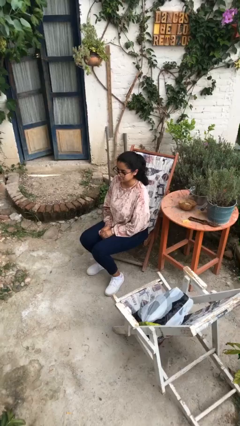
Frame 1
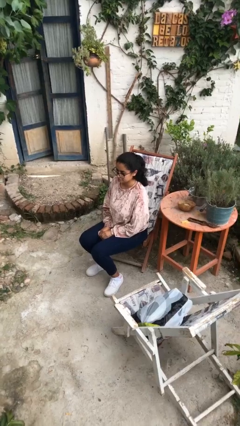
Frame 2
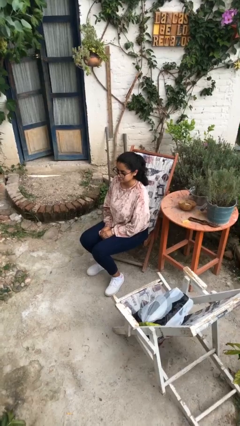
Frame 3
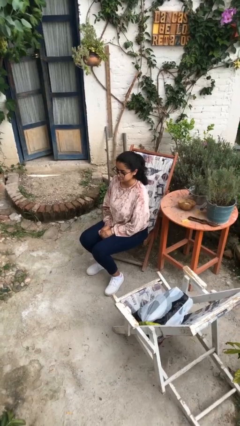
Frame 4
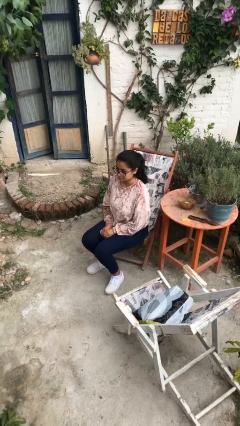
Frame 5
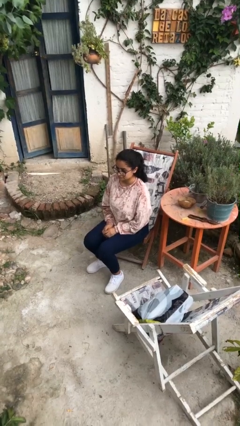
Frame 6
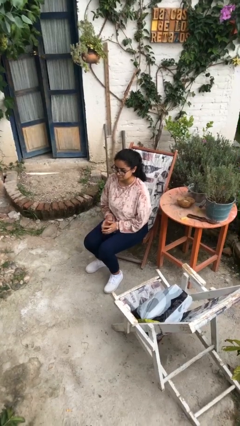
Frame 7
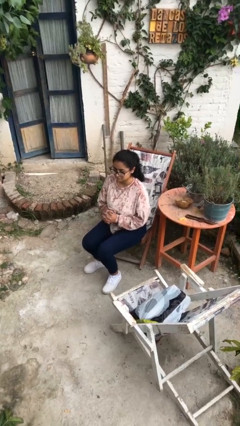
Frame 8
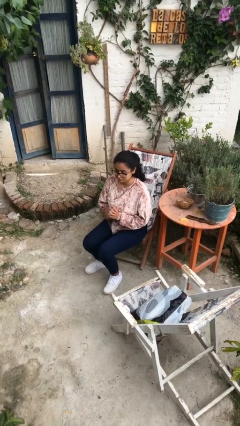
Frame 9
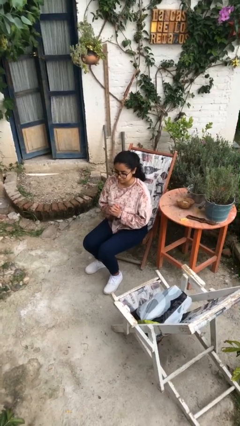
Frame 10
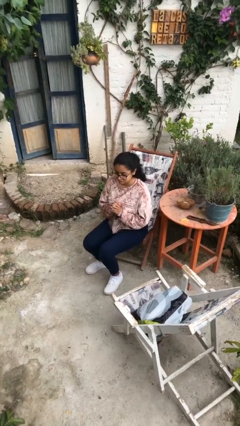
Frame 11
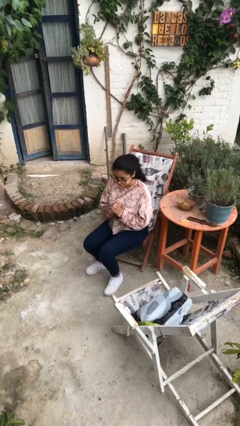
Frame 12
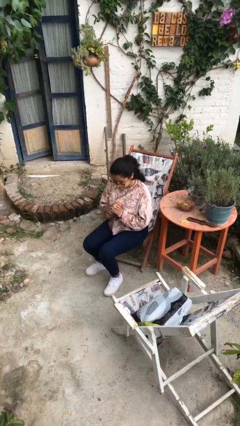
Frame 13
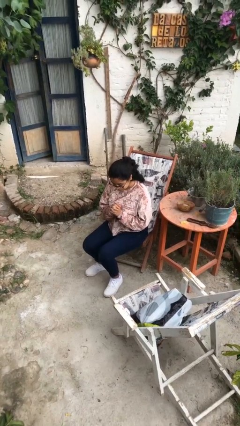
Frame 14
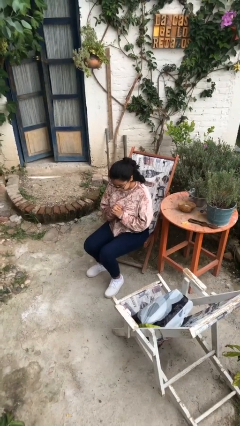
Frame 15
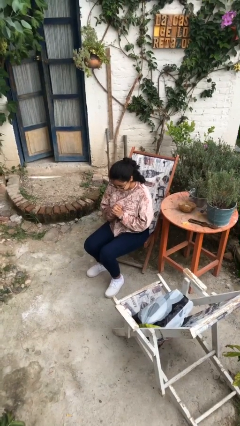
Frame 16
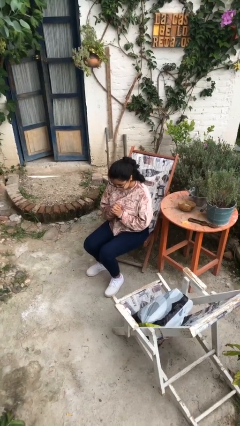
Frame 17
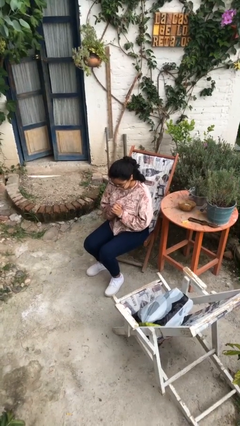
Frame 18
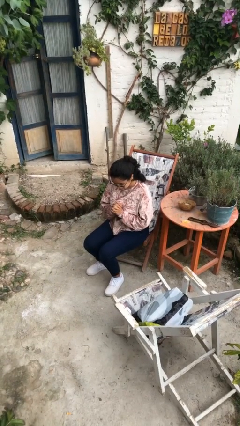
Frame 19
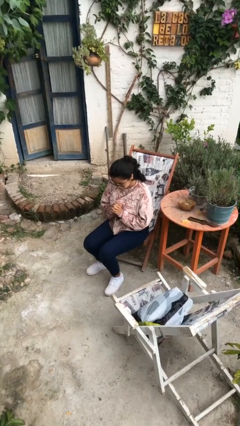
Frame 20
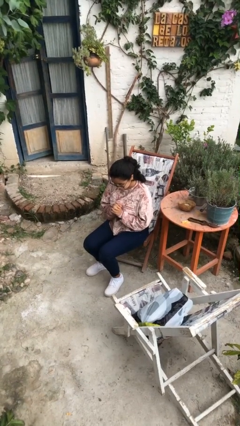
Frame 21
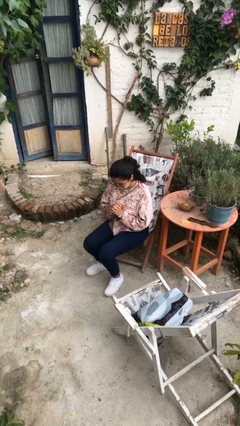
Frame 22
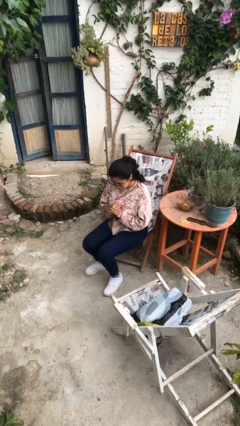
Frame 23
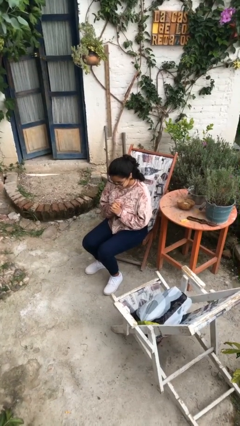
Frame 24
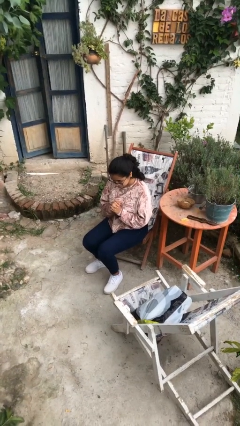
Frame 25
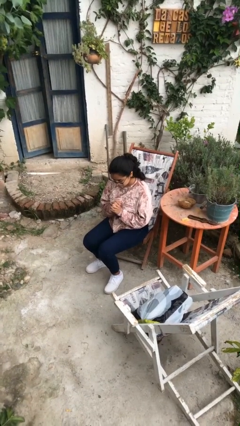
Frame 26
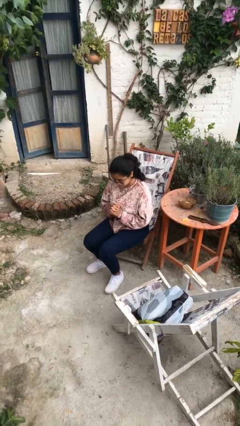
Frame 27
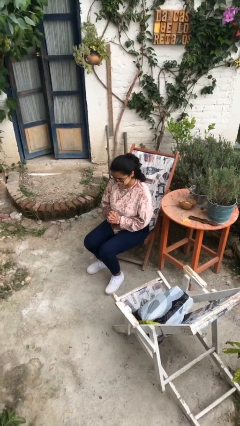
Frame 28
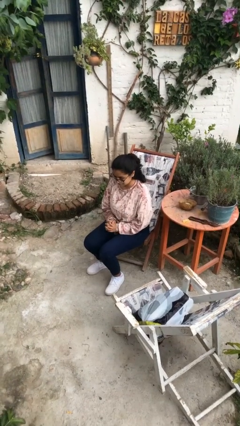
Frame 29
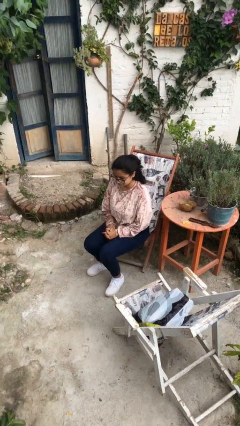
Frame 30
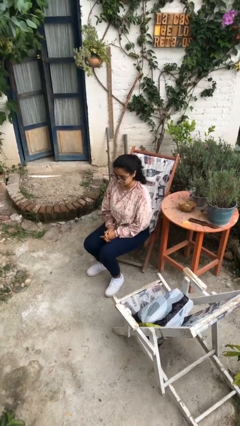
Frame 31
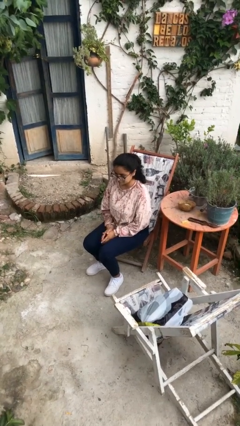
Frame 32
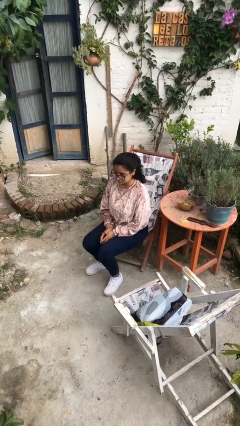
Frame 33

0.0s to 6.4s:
person prays

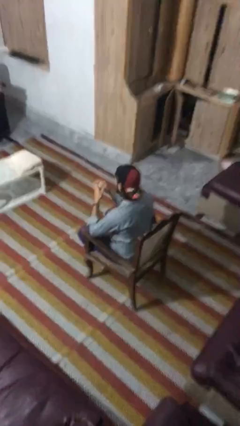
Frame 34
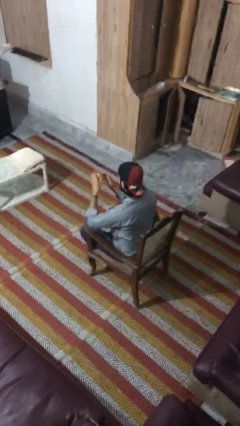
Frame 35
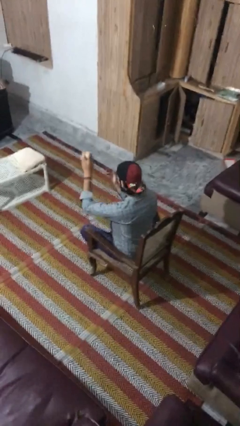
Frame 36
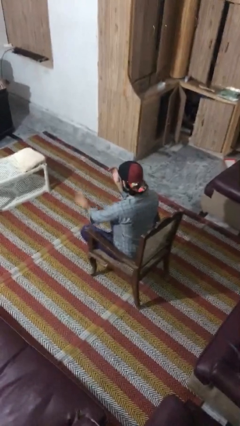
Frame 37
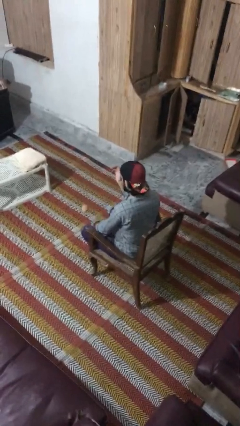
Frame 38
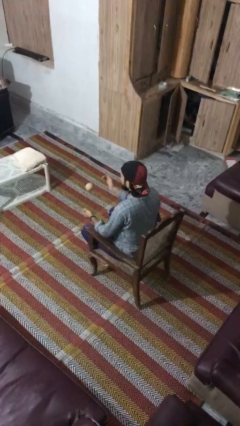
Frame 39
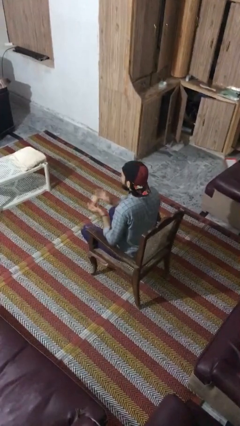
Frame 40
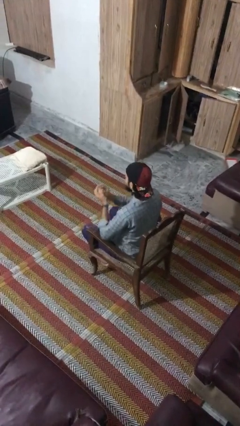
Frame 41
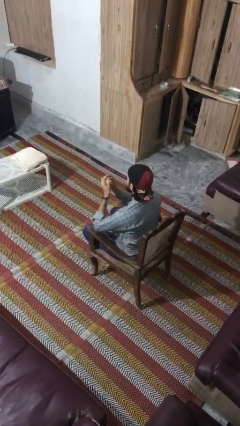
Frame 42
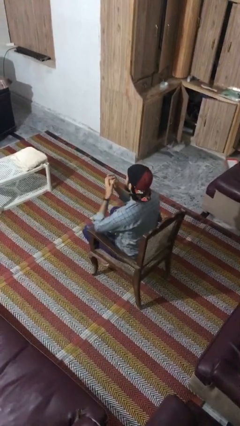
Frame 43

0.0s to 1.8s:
person bounces ball on floor

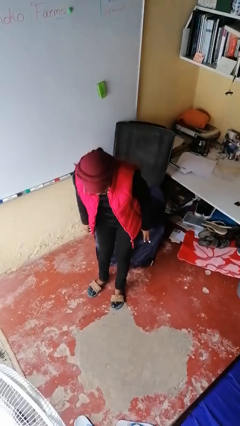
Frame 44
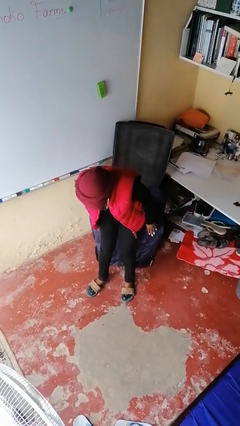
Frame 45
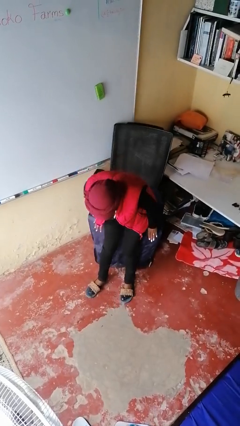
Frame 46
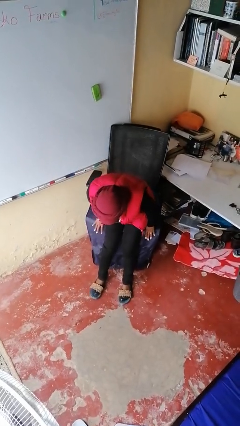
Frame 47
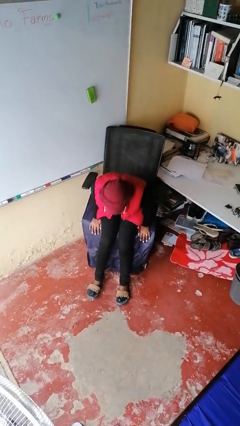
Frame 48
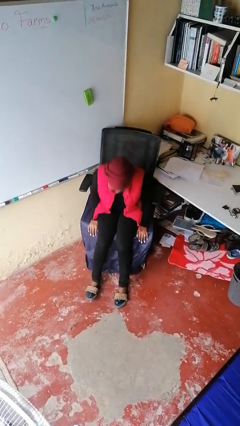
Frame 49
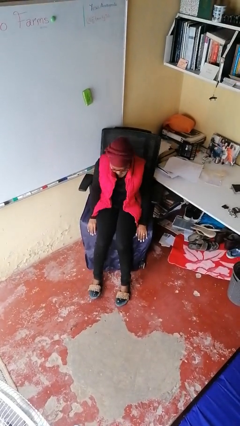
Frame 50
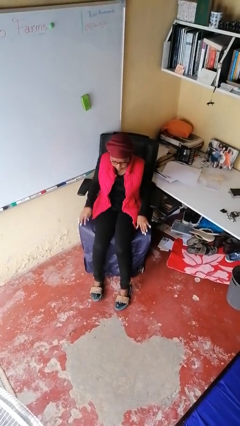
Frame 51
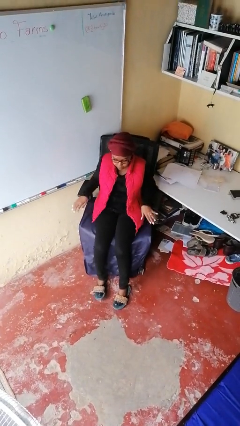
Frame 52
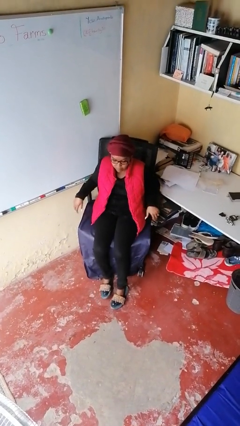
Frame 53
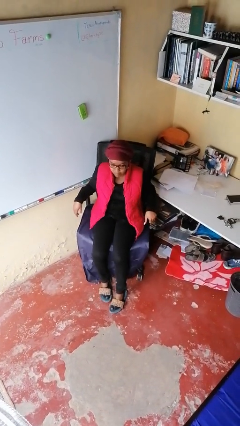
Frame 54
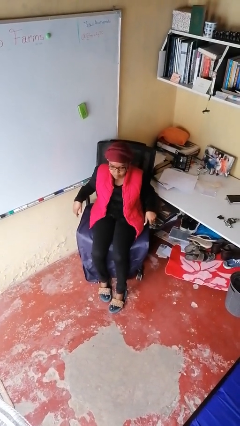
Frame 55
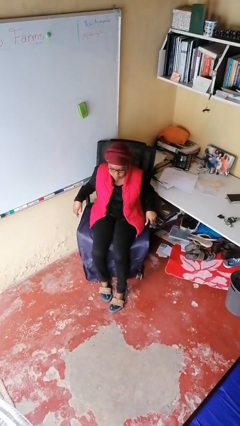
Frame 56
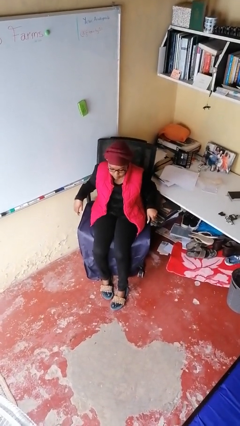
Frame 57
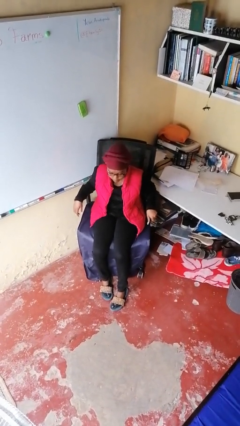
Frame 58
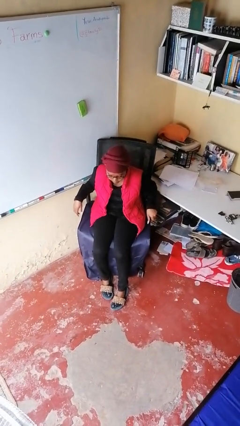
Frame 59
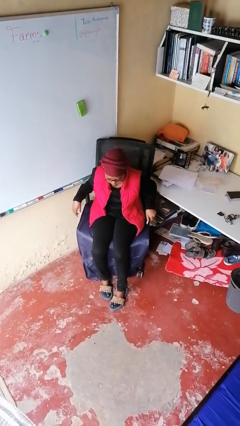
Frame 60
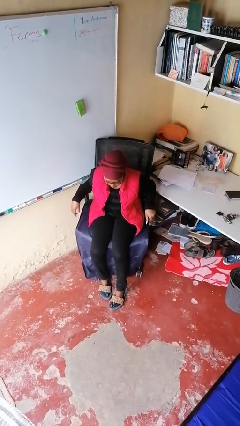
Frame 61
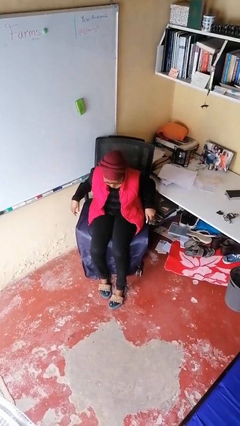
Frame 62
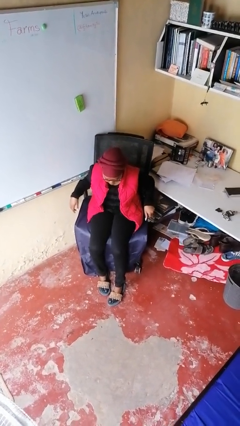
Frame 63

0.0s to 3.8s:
person sits down

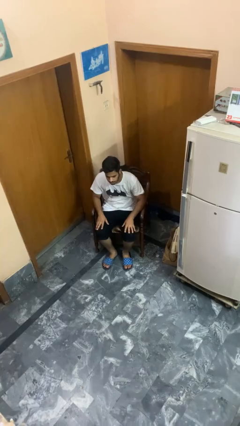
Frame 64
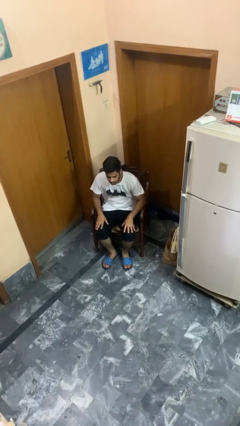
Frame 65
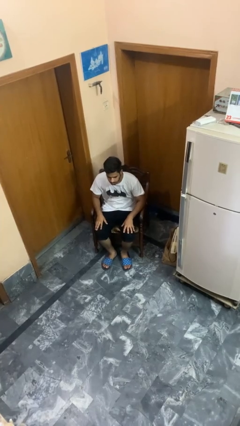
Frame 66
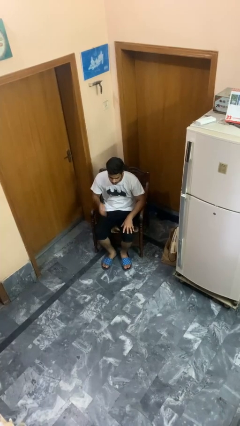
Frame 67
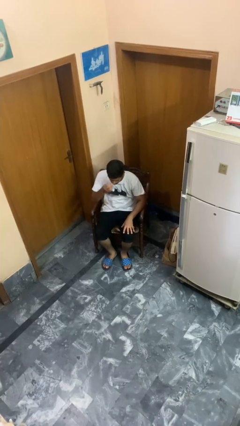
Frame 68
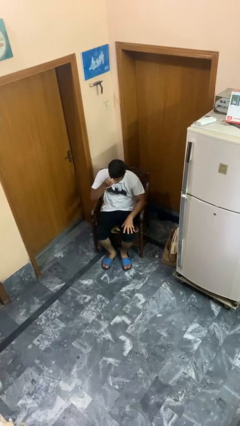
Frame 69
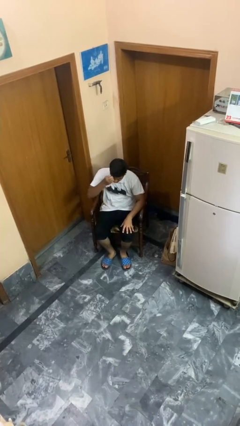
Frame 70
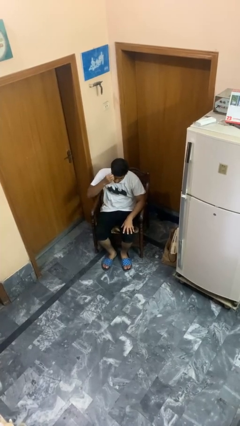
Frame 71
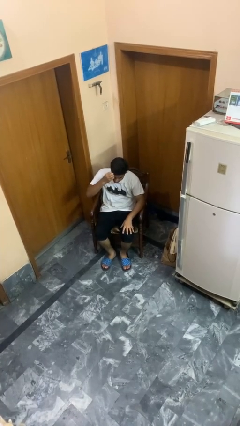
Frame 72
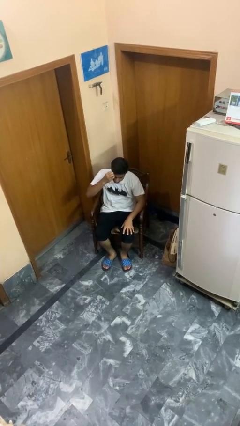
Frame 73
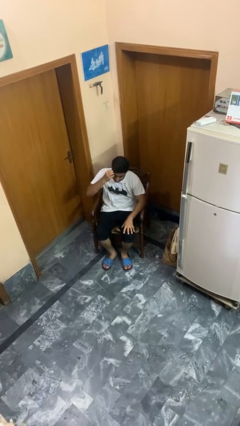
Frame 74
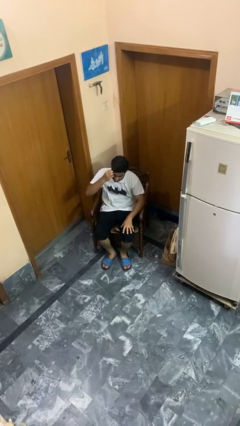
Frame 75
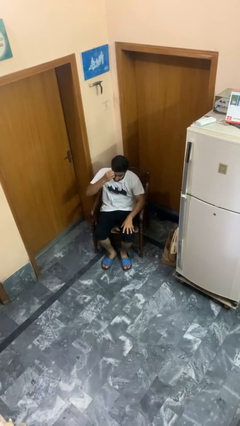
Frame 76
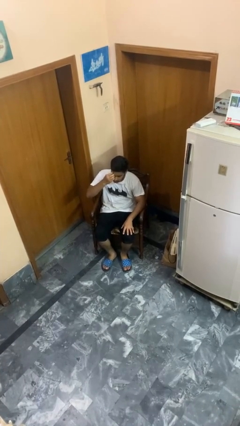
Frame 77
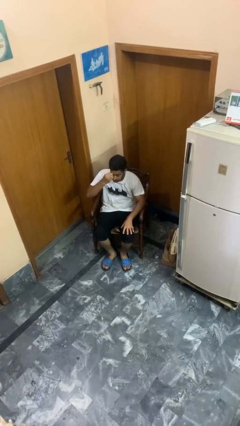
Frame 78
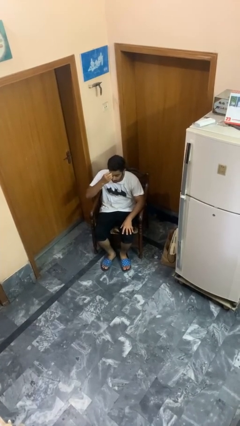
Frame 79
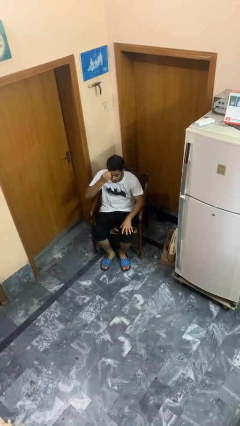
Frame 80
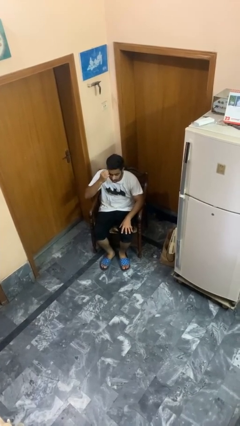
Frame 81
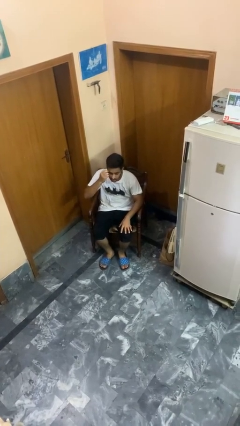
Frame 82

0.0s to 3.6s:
person scratches face

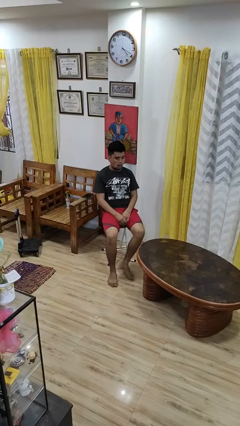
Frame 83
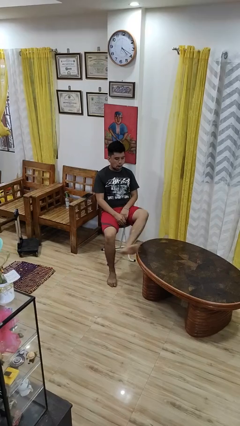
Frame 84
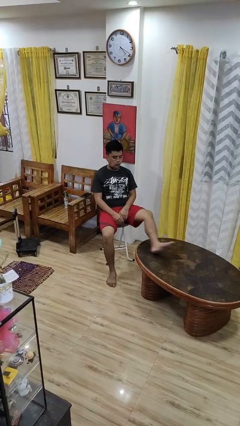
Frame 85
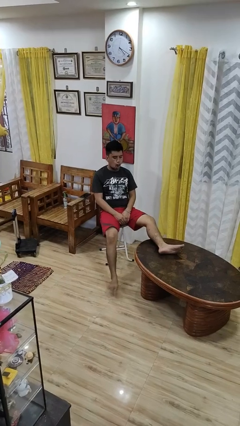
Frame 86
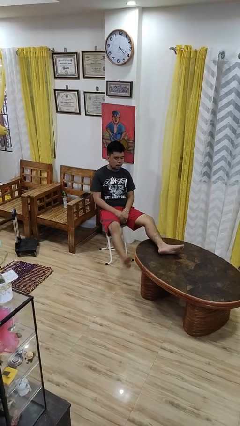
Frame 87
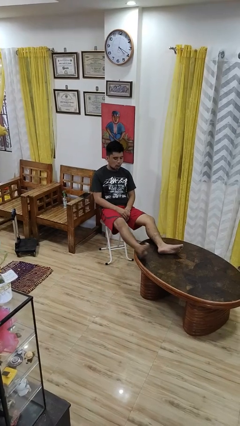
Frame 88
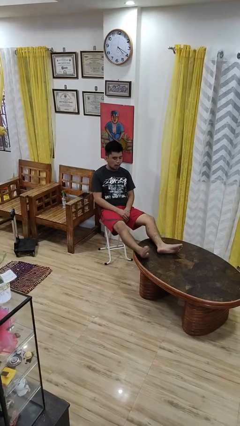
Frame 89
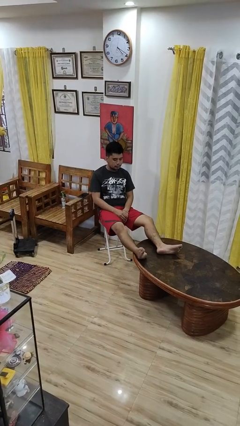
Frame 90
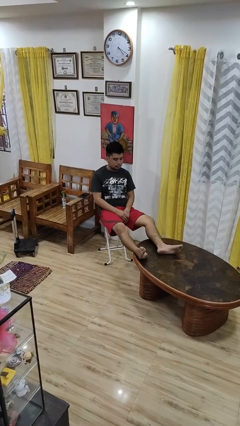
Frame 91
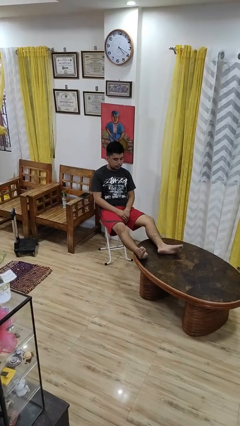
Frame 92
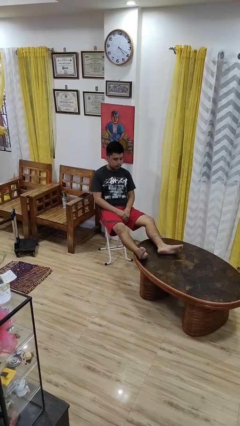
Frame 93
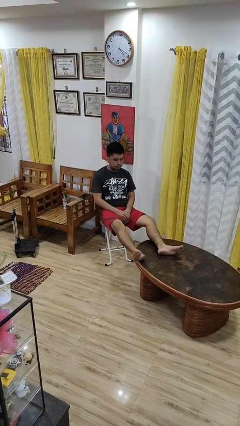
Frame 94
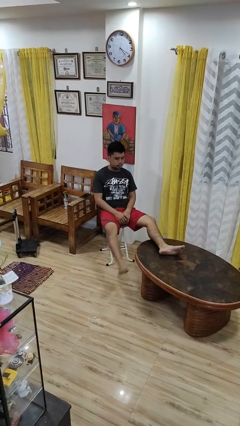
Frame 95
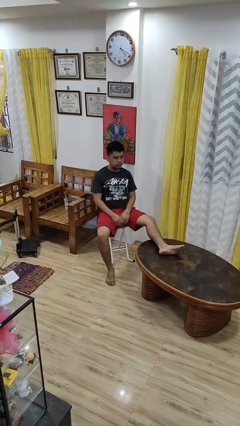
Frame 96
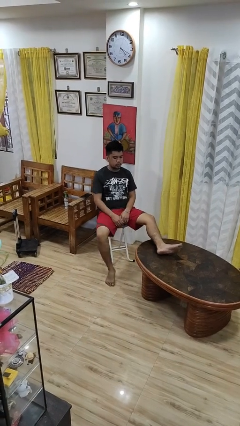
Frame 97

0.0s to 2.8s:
person puts feet up
